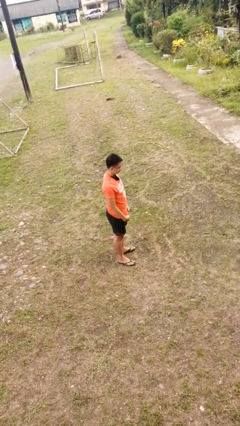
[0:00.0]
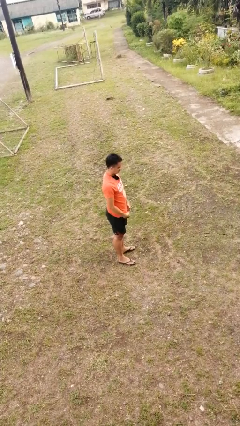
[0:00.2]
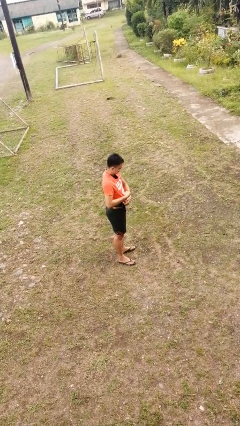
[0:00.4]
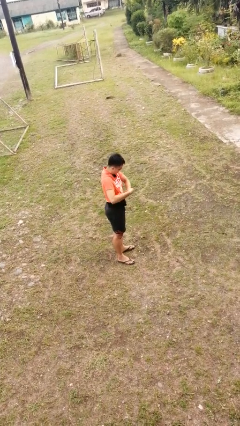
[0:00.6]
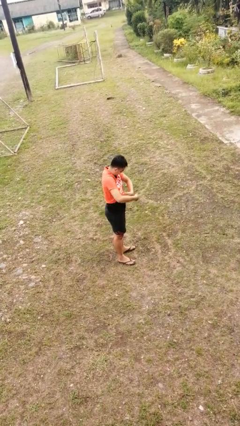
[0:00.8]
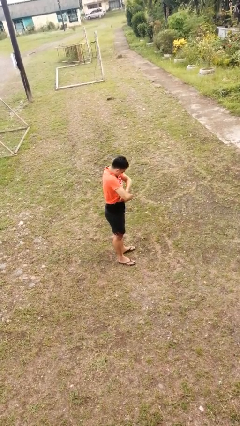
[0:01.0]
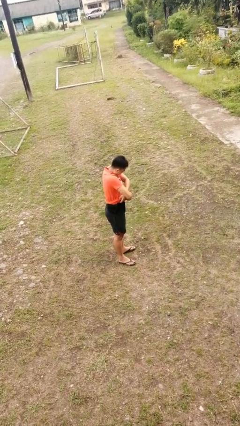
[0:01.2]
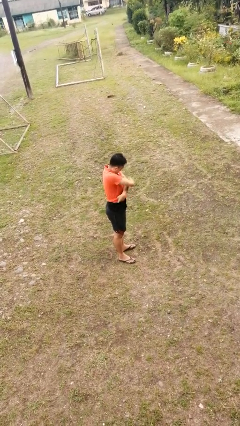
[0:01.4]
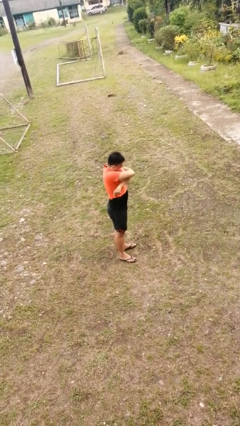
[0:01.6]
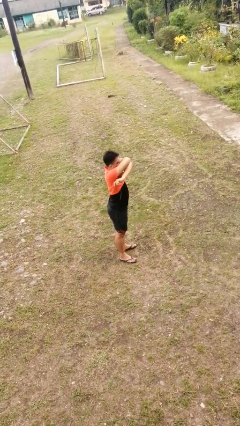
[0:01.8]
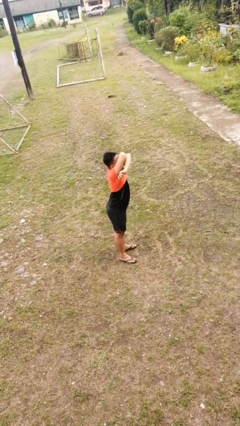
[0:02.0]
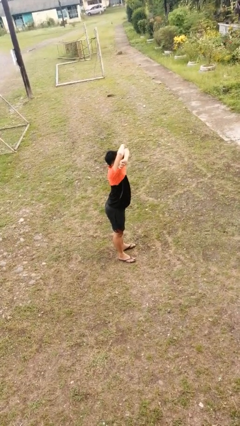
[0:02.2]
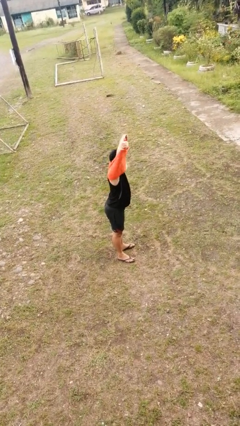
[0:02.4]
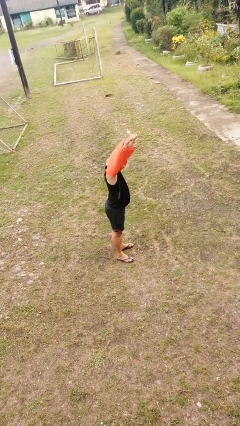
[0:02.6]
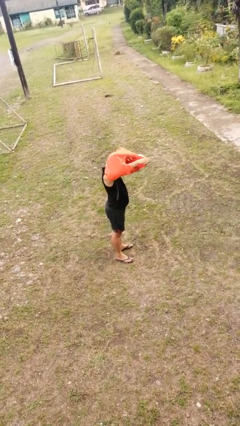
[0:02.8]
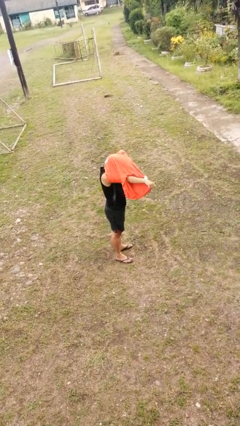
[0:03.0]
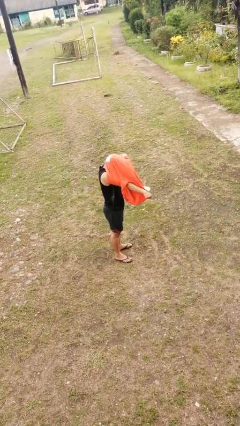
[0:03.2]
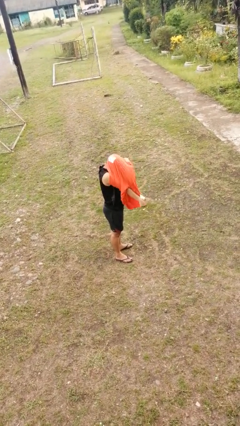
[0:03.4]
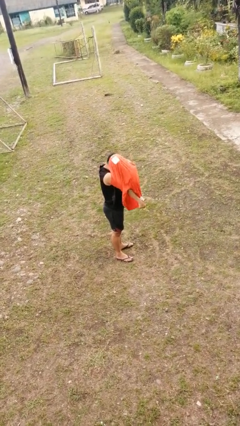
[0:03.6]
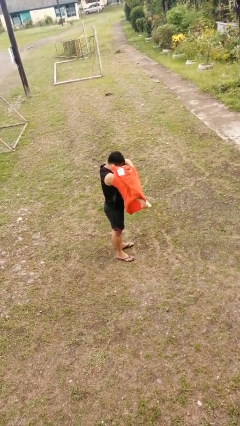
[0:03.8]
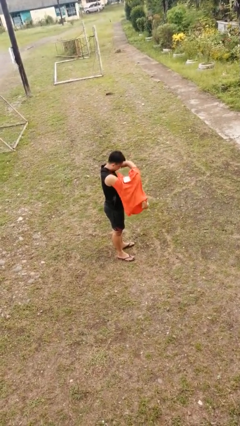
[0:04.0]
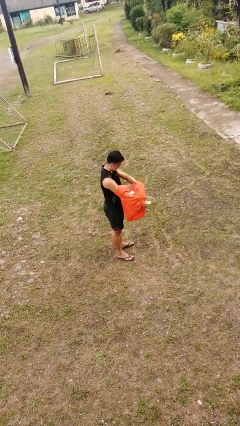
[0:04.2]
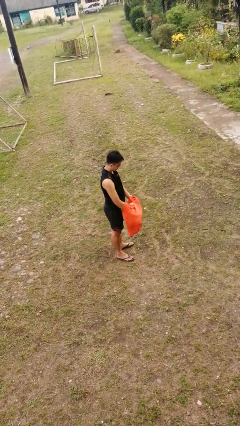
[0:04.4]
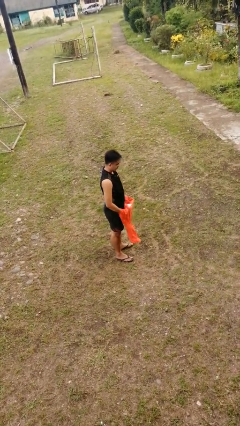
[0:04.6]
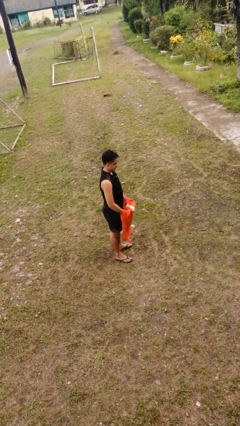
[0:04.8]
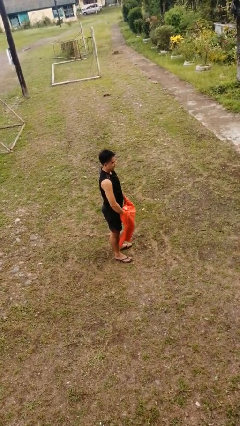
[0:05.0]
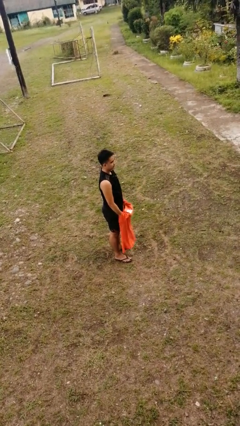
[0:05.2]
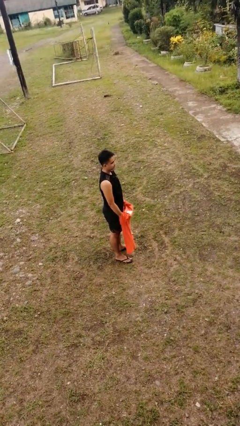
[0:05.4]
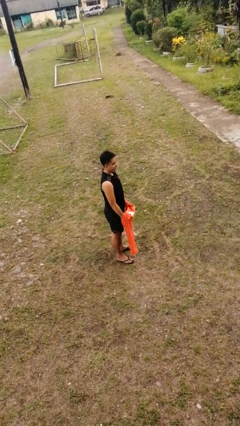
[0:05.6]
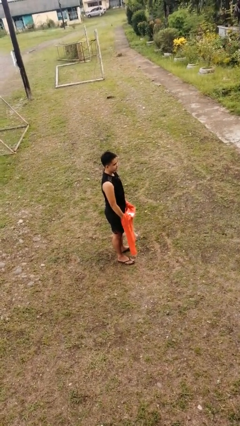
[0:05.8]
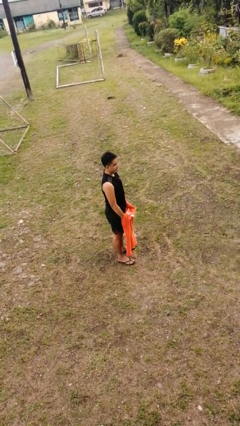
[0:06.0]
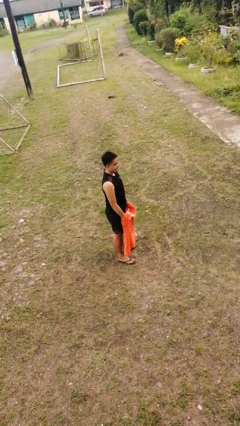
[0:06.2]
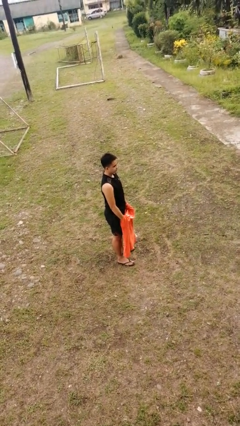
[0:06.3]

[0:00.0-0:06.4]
person takes off shirt

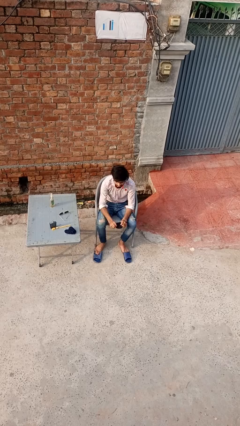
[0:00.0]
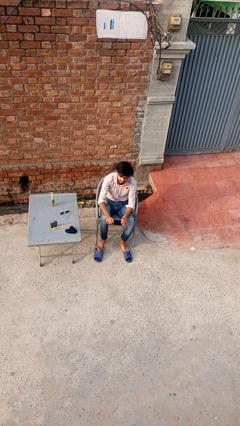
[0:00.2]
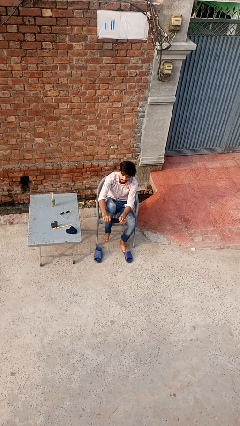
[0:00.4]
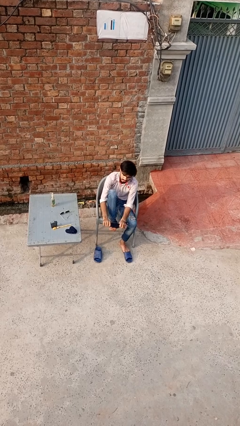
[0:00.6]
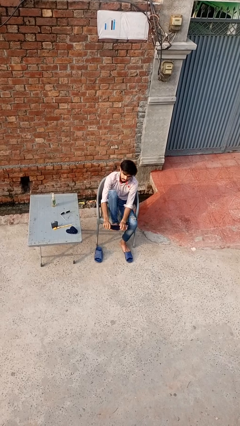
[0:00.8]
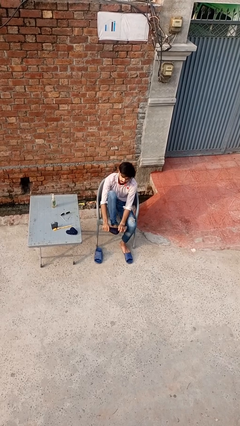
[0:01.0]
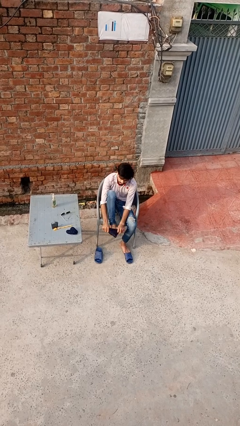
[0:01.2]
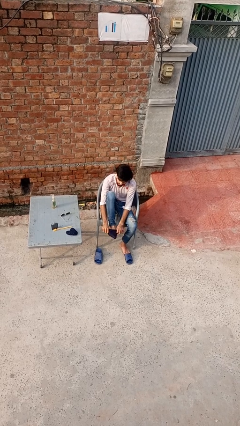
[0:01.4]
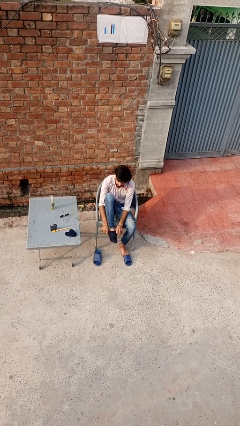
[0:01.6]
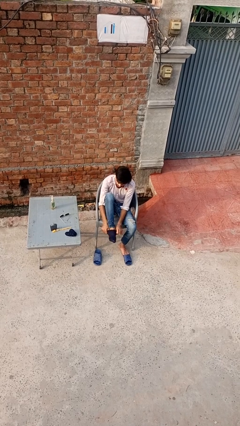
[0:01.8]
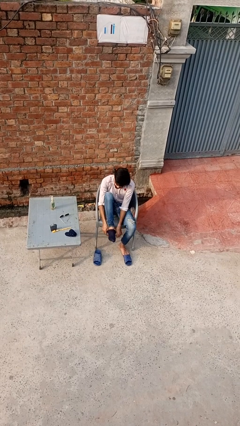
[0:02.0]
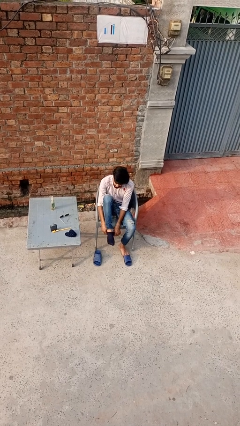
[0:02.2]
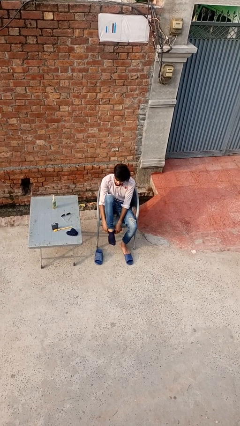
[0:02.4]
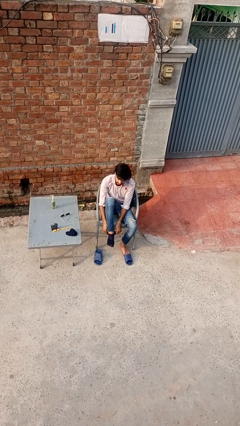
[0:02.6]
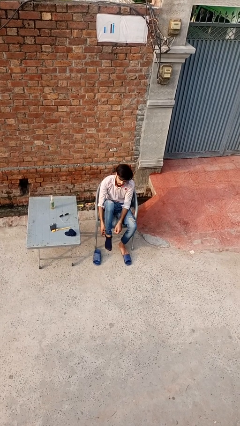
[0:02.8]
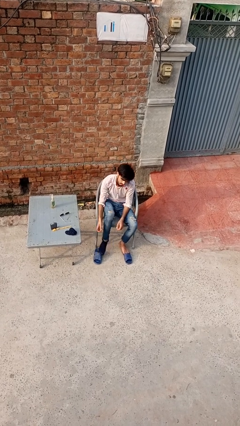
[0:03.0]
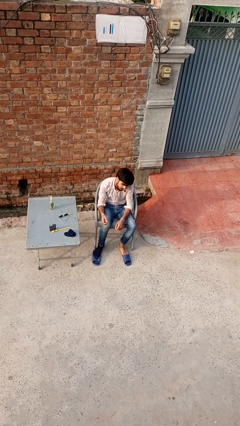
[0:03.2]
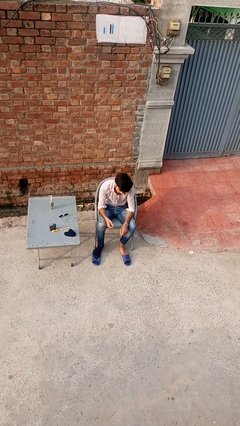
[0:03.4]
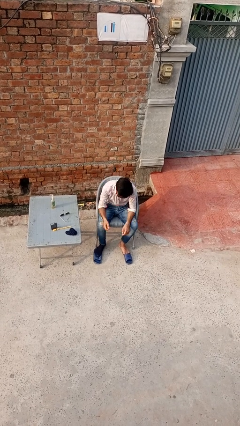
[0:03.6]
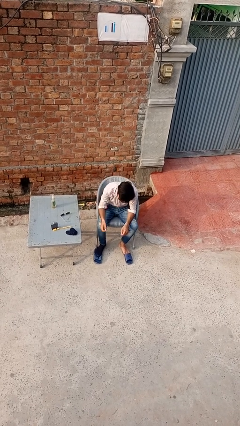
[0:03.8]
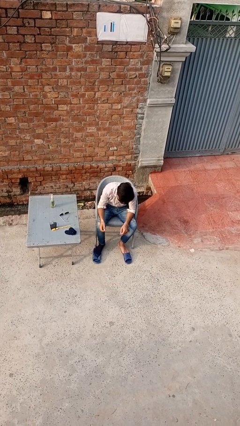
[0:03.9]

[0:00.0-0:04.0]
person puts on socks

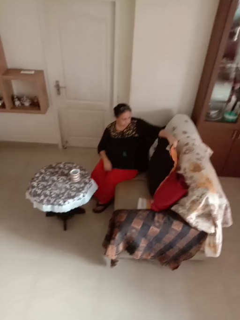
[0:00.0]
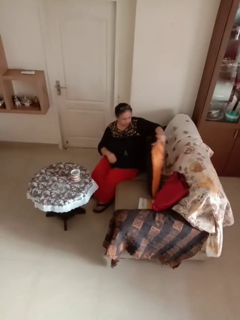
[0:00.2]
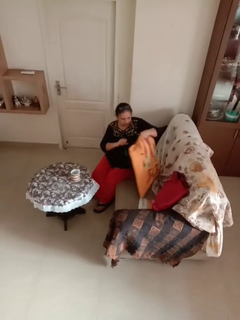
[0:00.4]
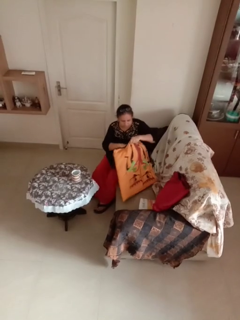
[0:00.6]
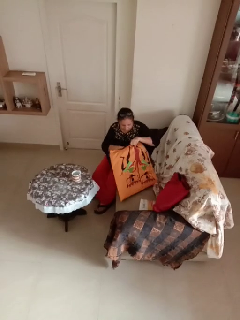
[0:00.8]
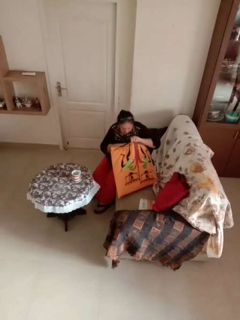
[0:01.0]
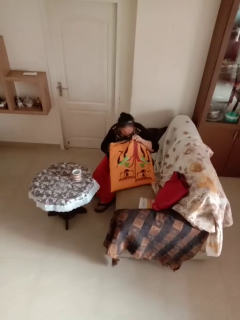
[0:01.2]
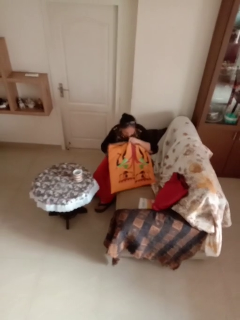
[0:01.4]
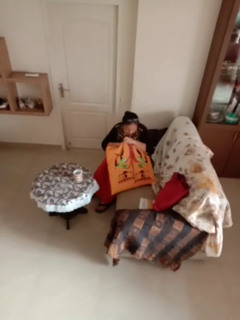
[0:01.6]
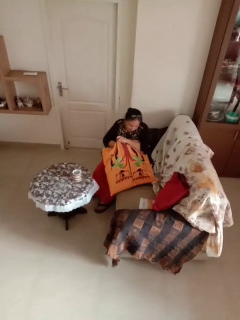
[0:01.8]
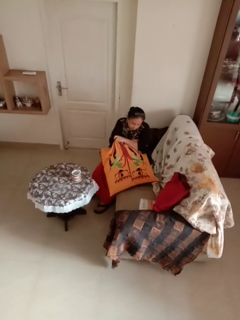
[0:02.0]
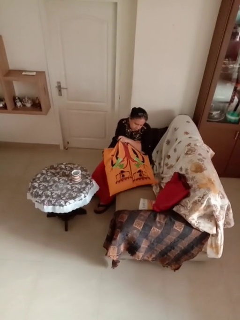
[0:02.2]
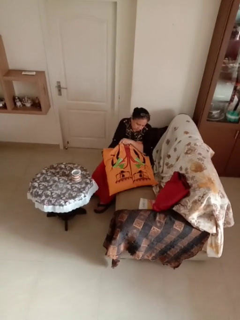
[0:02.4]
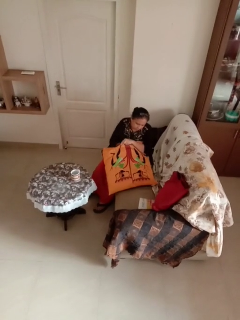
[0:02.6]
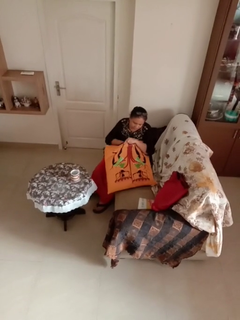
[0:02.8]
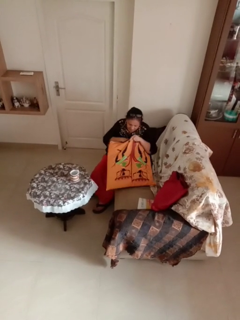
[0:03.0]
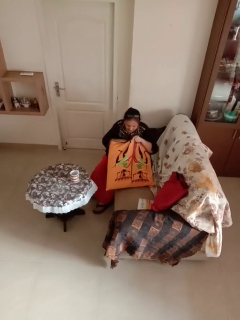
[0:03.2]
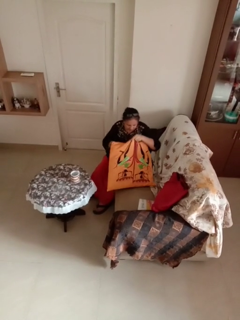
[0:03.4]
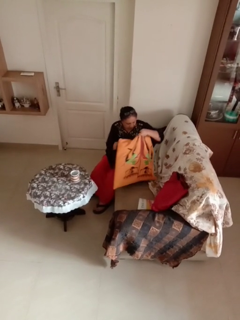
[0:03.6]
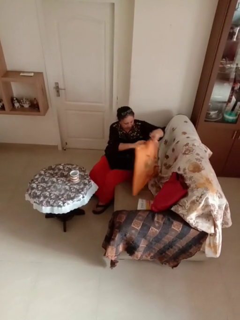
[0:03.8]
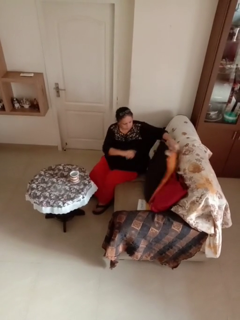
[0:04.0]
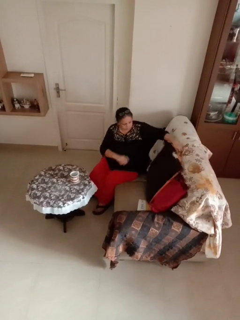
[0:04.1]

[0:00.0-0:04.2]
person searches in couch

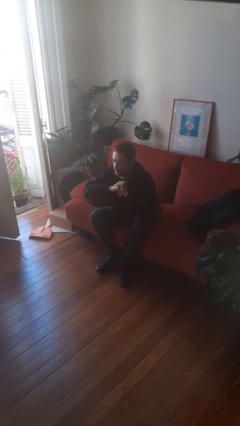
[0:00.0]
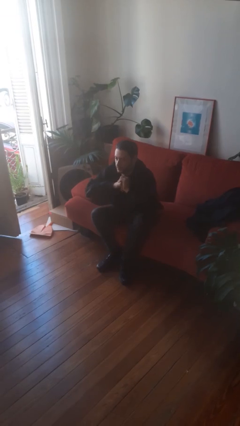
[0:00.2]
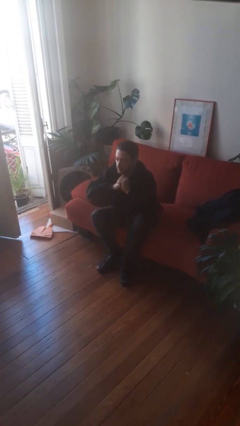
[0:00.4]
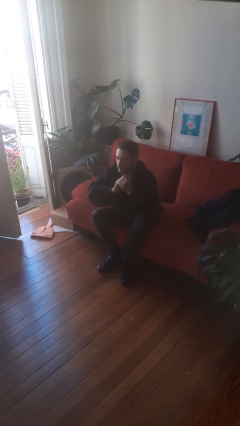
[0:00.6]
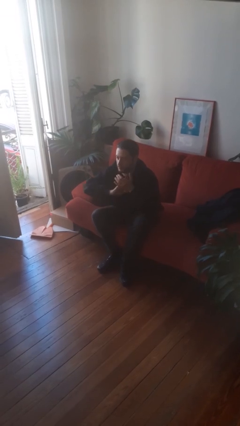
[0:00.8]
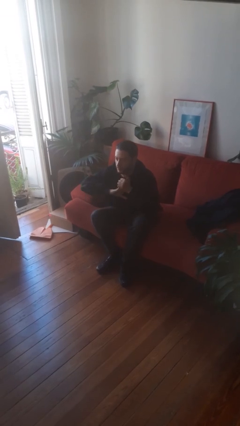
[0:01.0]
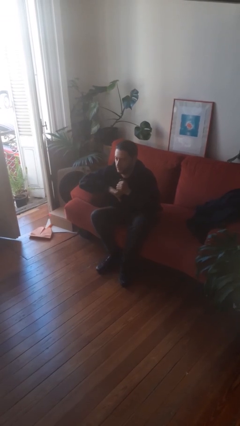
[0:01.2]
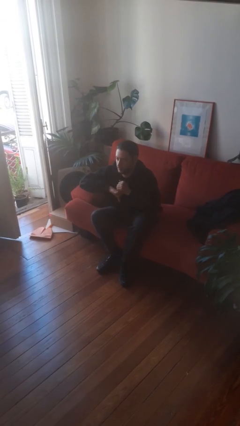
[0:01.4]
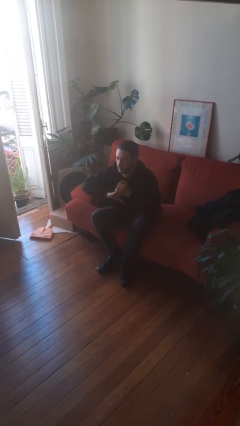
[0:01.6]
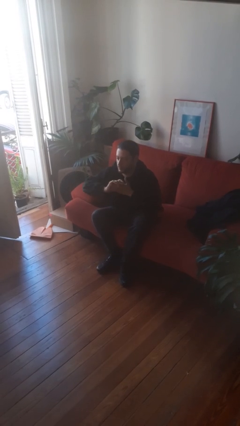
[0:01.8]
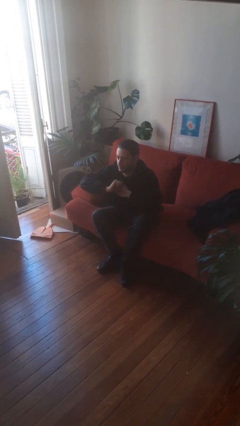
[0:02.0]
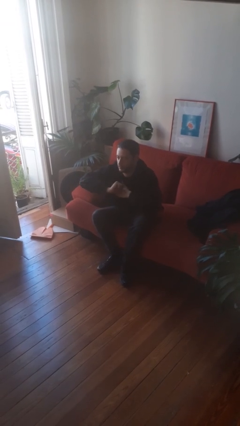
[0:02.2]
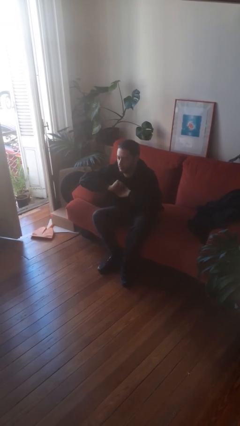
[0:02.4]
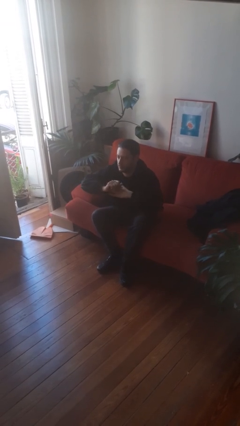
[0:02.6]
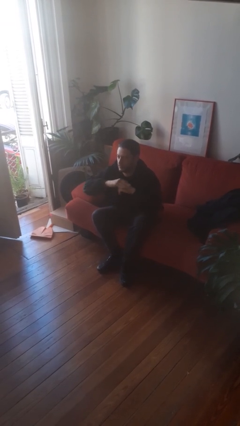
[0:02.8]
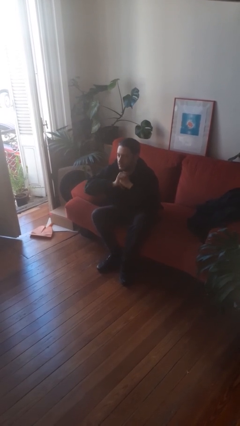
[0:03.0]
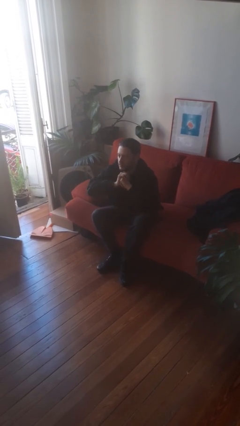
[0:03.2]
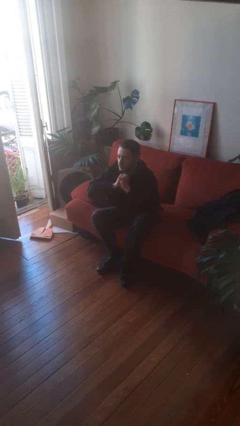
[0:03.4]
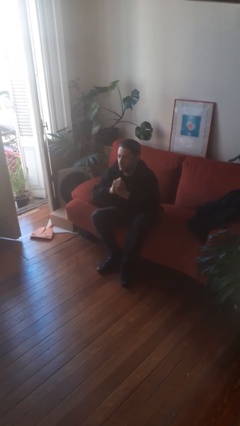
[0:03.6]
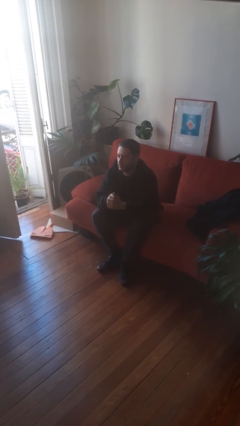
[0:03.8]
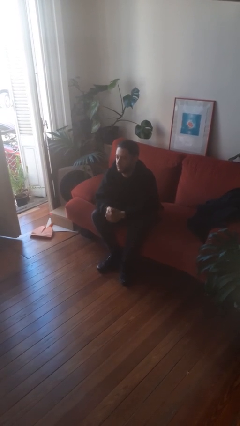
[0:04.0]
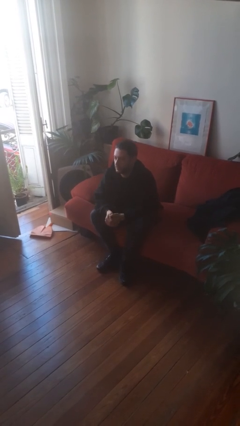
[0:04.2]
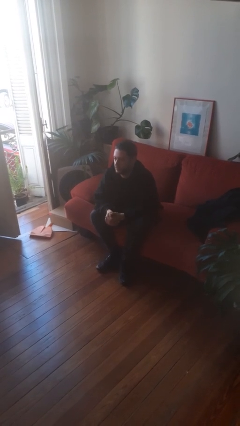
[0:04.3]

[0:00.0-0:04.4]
person cracks knuckles
